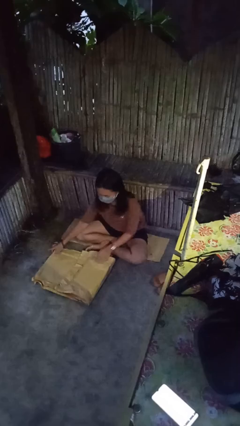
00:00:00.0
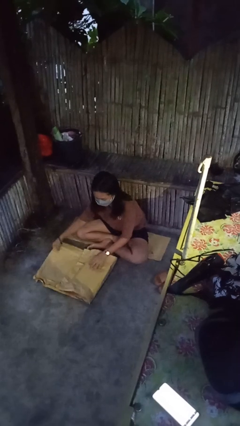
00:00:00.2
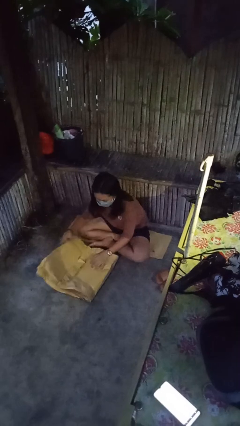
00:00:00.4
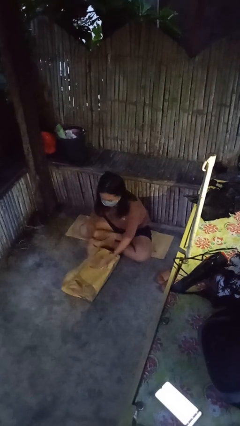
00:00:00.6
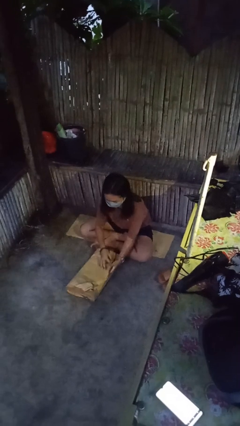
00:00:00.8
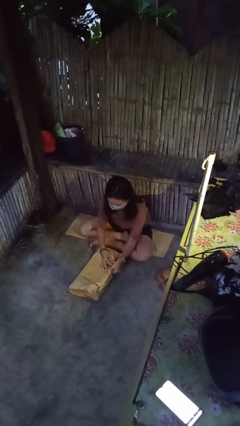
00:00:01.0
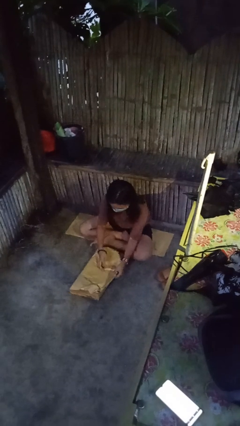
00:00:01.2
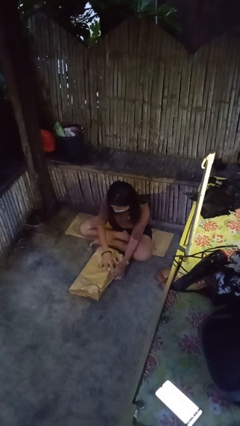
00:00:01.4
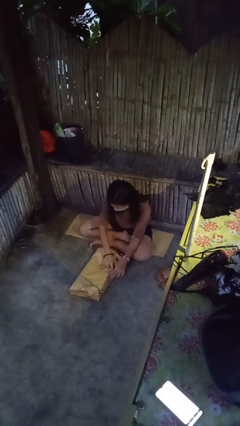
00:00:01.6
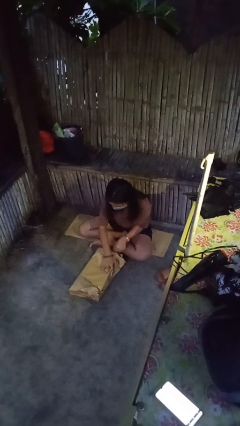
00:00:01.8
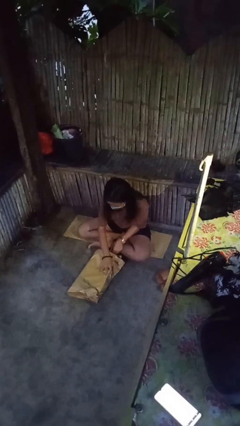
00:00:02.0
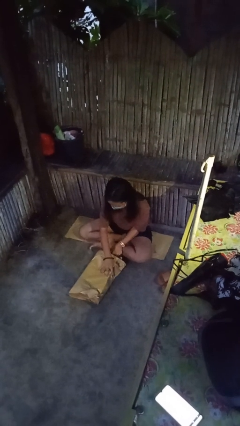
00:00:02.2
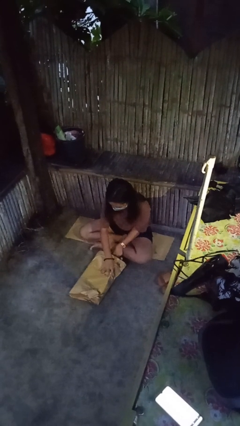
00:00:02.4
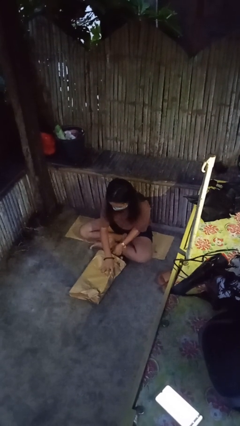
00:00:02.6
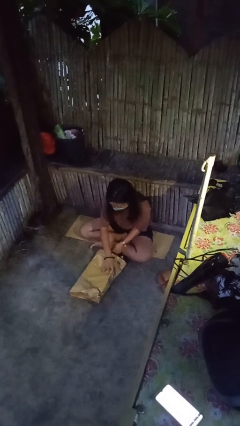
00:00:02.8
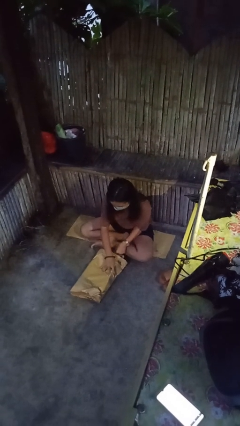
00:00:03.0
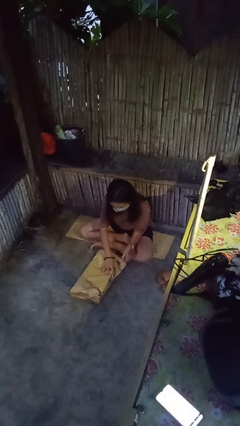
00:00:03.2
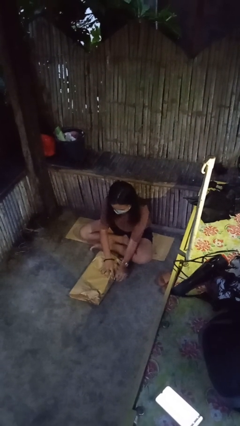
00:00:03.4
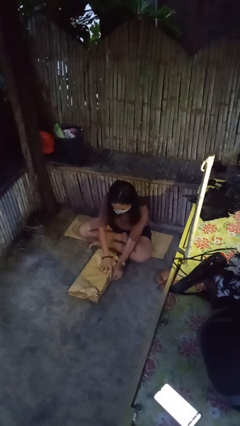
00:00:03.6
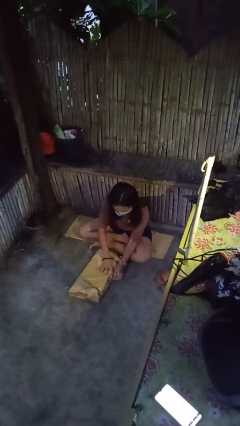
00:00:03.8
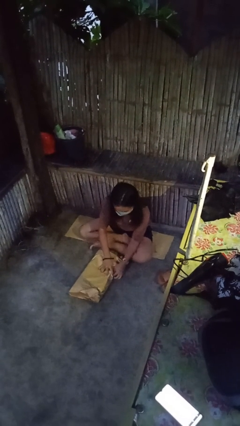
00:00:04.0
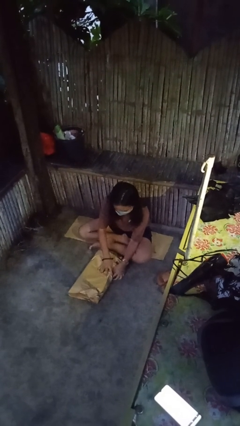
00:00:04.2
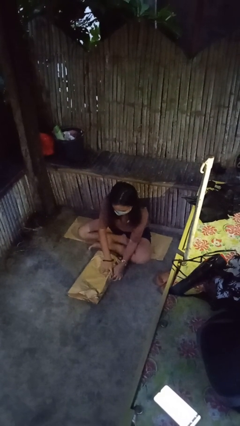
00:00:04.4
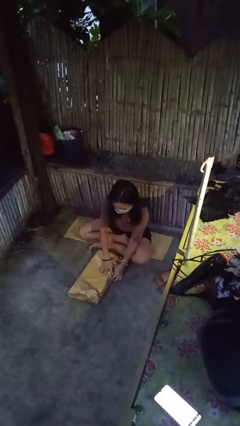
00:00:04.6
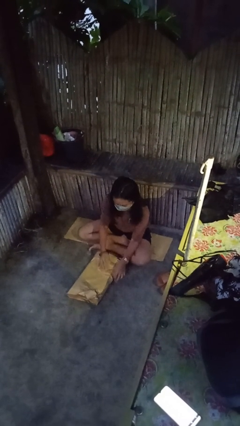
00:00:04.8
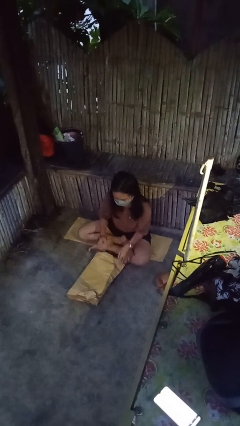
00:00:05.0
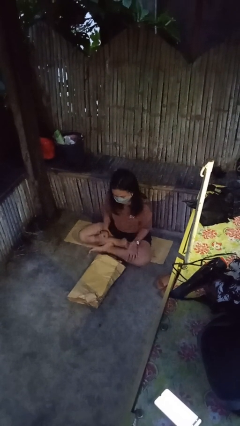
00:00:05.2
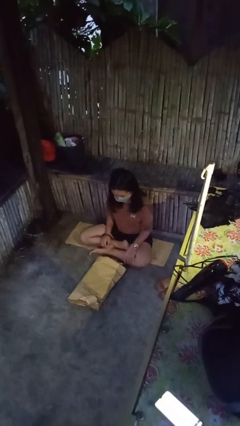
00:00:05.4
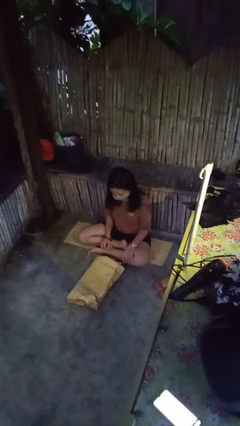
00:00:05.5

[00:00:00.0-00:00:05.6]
person wraps box

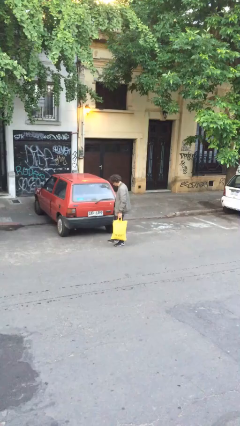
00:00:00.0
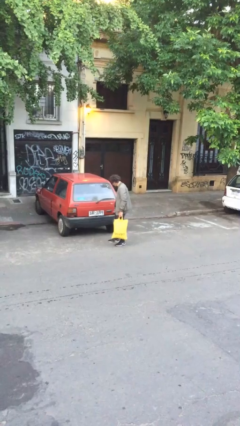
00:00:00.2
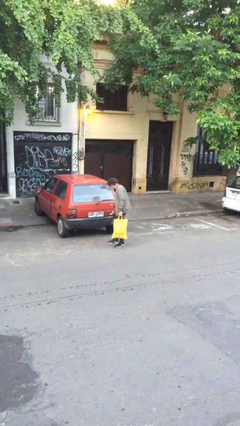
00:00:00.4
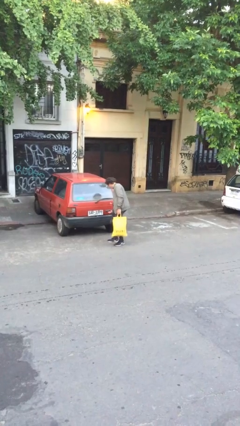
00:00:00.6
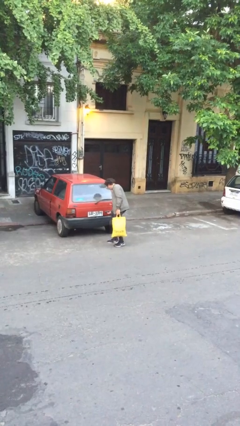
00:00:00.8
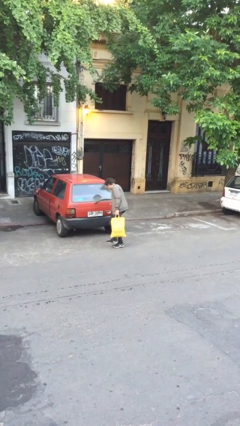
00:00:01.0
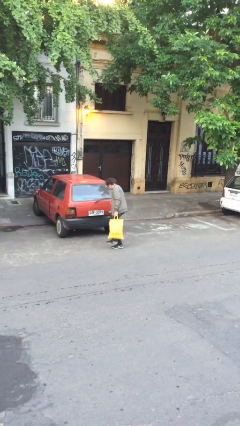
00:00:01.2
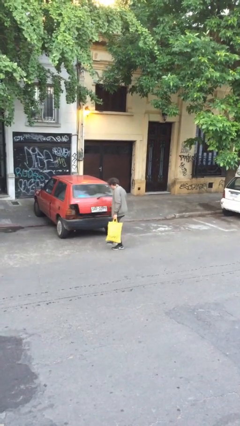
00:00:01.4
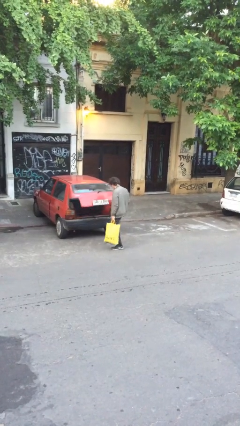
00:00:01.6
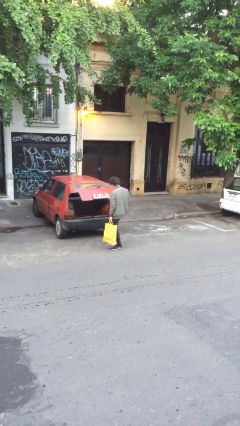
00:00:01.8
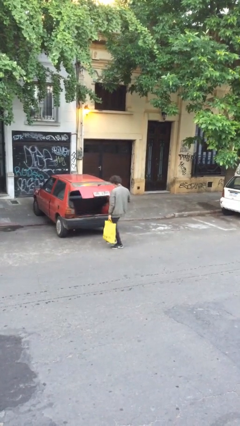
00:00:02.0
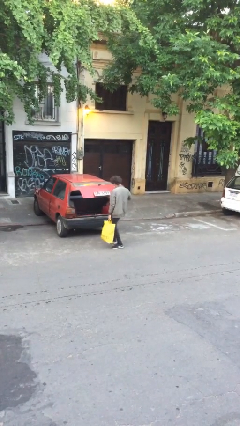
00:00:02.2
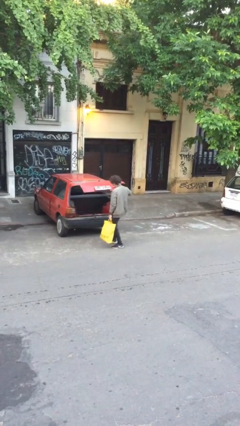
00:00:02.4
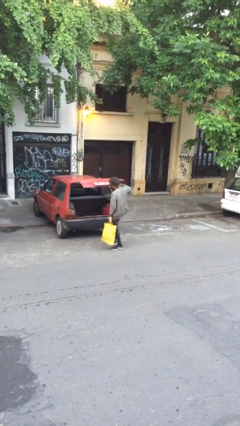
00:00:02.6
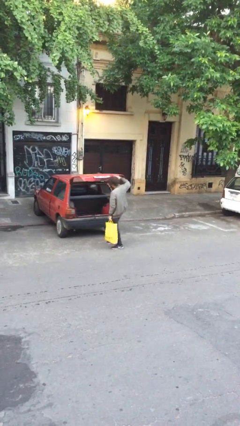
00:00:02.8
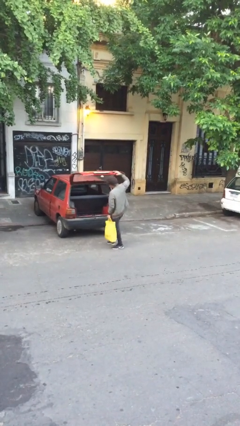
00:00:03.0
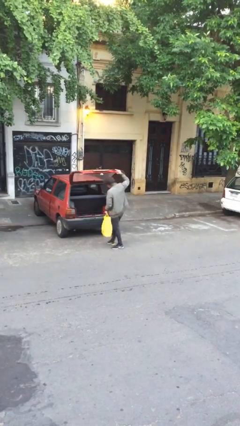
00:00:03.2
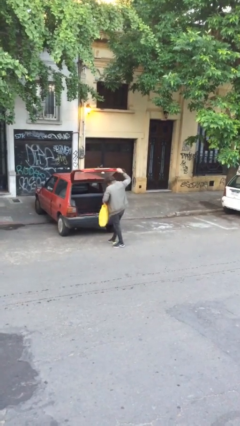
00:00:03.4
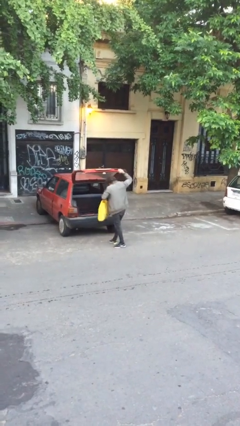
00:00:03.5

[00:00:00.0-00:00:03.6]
person opens car trunk

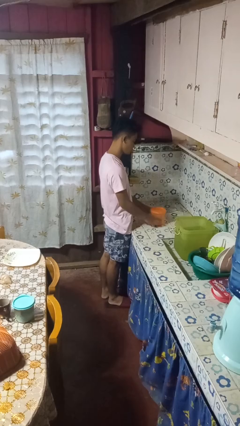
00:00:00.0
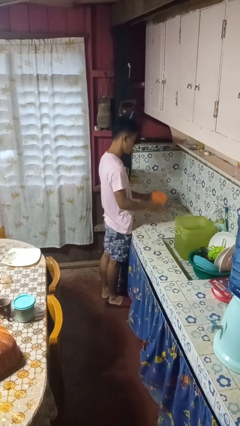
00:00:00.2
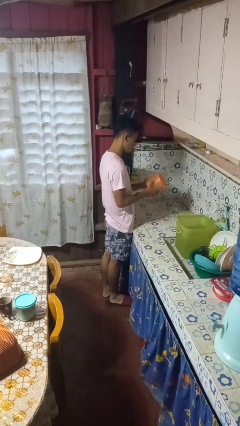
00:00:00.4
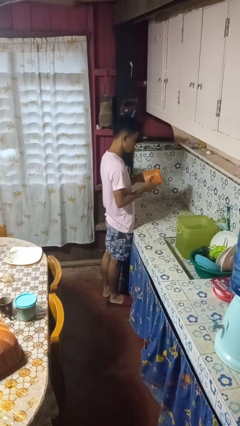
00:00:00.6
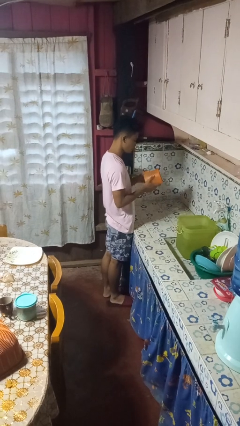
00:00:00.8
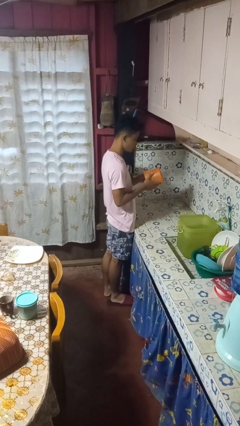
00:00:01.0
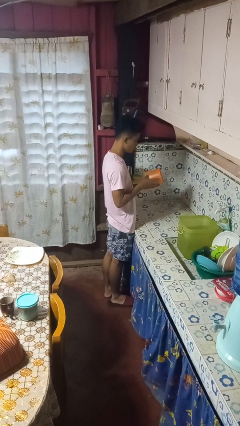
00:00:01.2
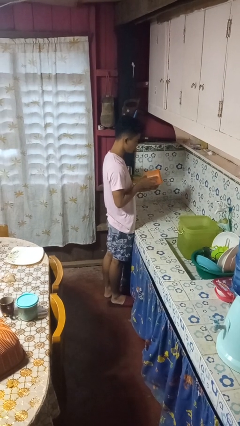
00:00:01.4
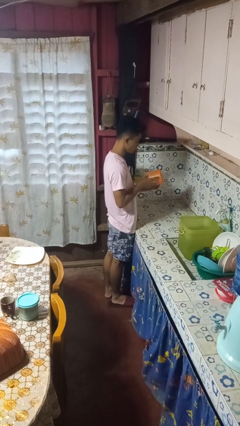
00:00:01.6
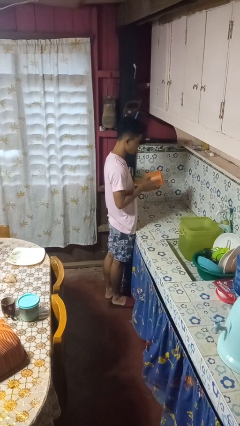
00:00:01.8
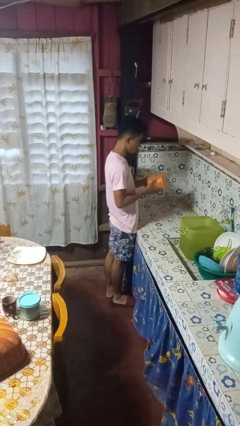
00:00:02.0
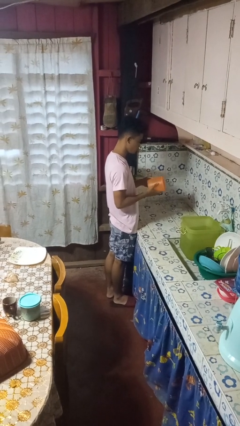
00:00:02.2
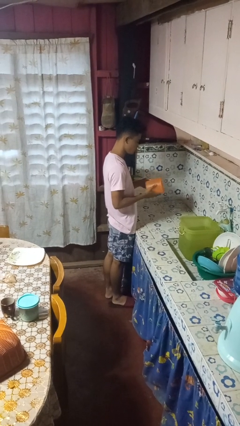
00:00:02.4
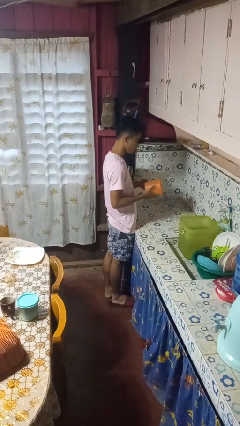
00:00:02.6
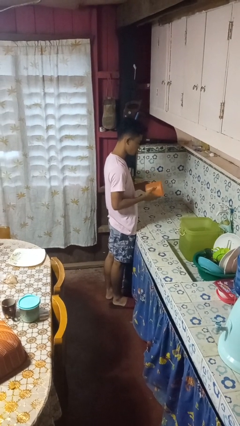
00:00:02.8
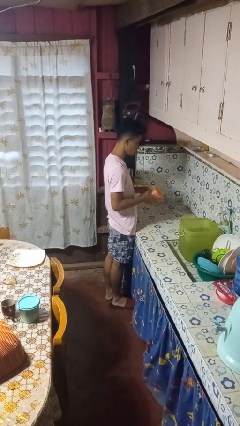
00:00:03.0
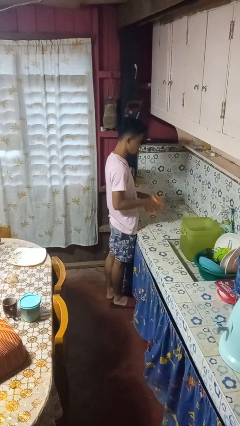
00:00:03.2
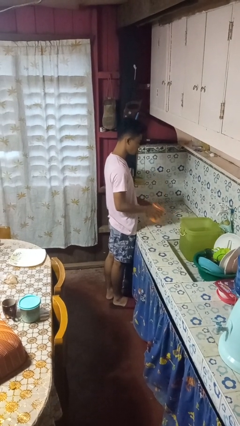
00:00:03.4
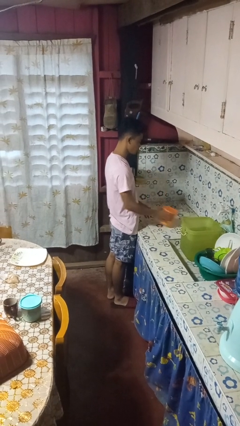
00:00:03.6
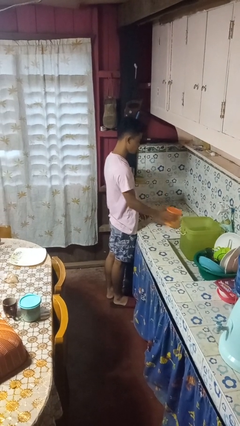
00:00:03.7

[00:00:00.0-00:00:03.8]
person picks up object from countertop

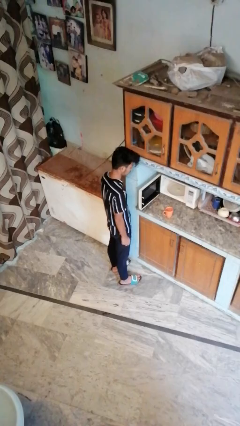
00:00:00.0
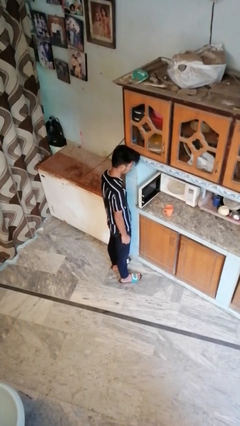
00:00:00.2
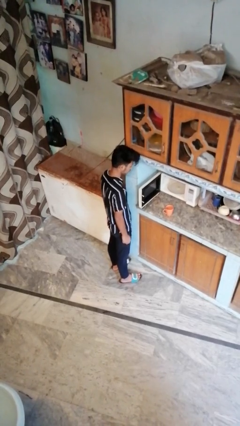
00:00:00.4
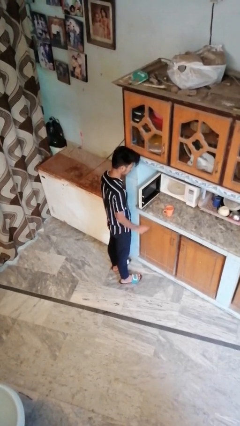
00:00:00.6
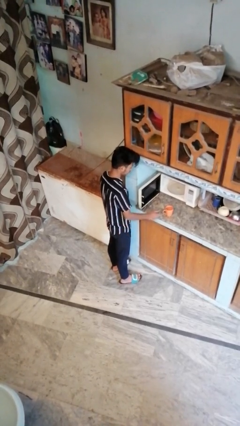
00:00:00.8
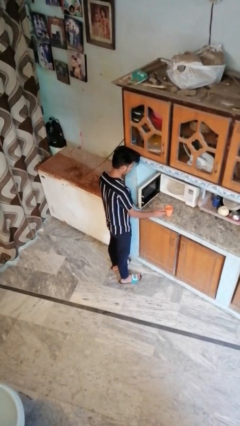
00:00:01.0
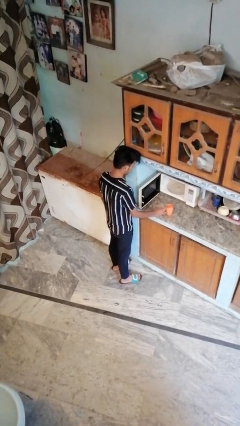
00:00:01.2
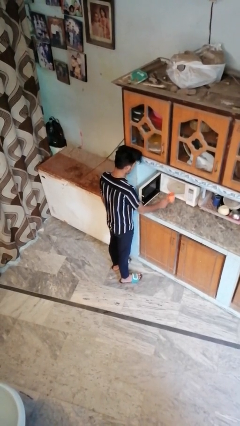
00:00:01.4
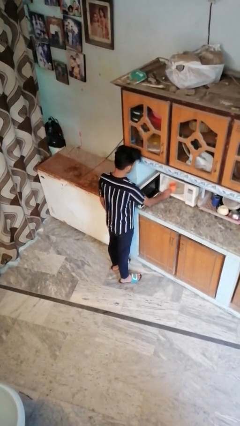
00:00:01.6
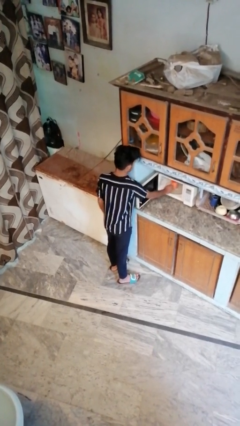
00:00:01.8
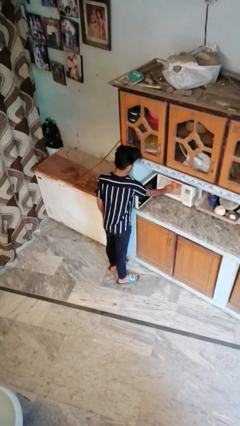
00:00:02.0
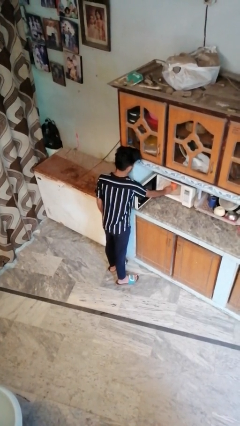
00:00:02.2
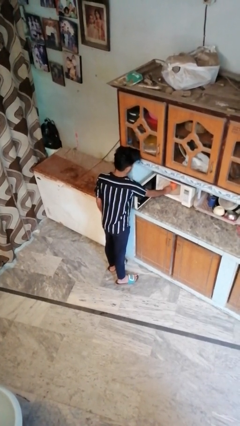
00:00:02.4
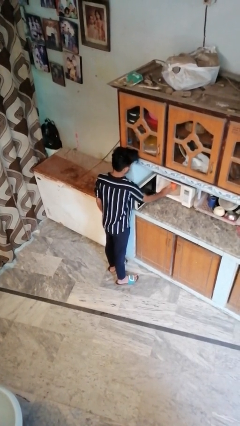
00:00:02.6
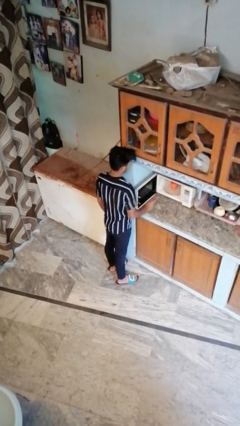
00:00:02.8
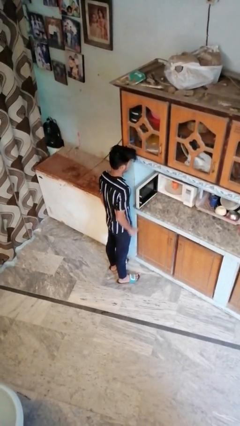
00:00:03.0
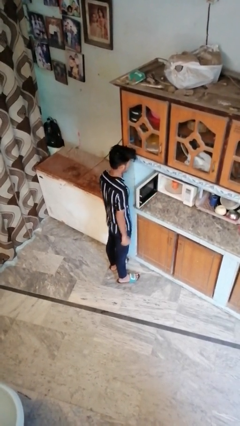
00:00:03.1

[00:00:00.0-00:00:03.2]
person puts object into microwave

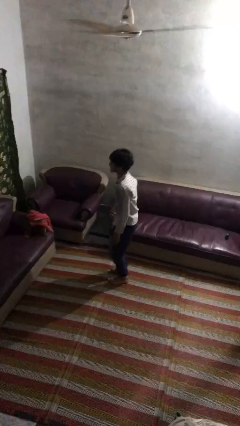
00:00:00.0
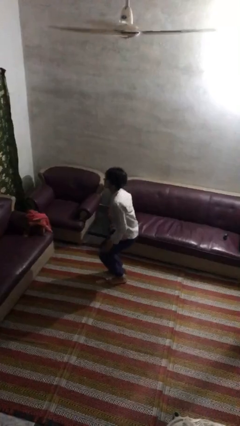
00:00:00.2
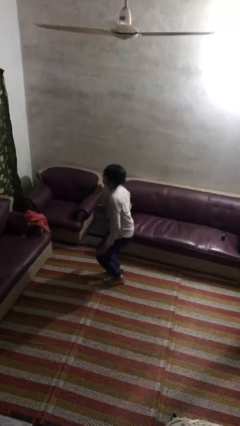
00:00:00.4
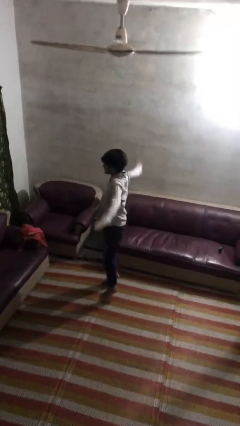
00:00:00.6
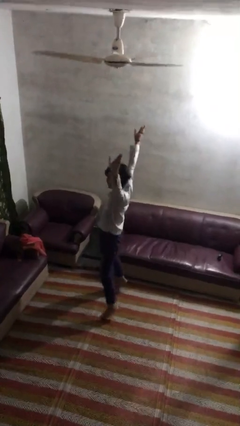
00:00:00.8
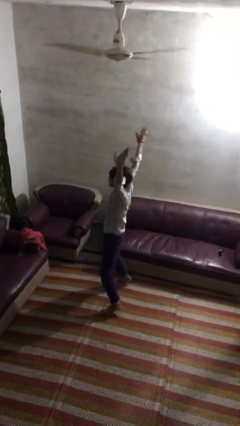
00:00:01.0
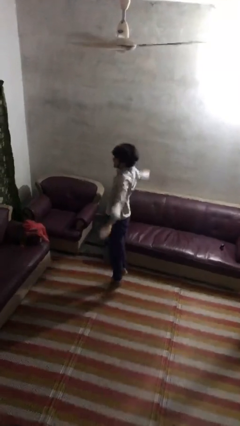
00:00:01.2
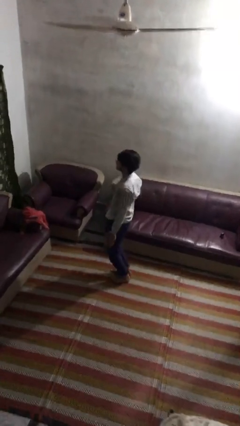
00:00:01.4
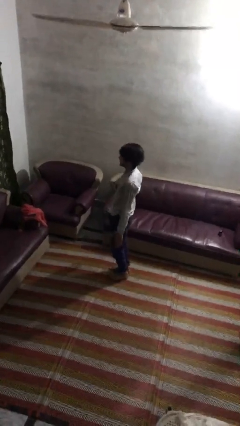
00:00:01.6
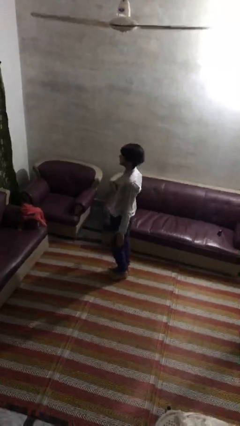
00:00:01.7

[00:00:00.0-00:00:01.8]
person exercises with jumping jacks
